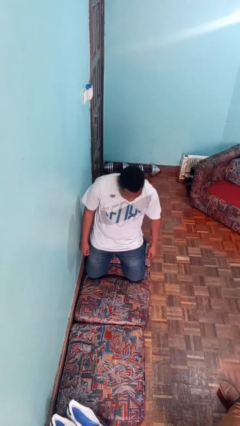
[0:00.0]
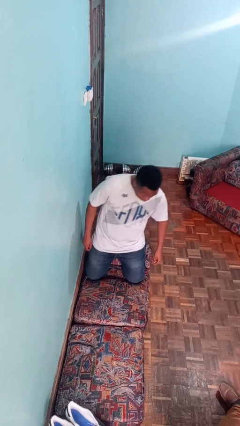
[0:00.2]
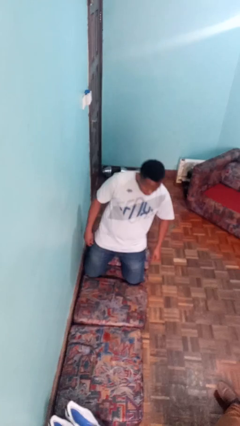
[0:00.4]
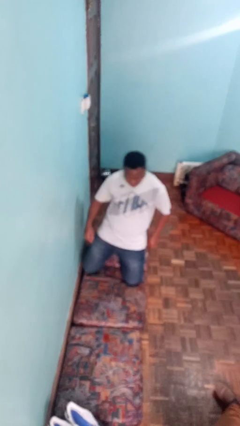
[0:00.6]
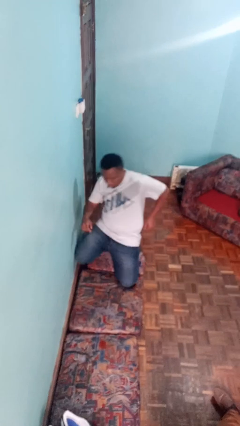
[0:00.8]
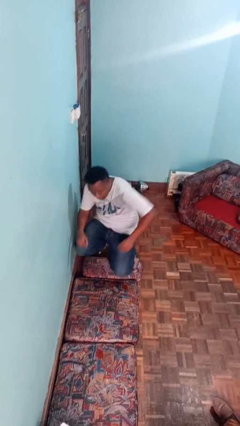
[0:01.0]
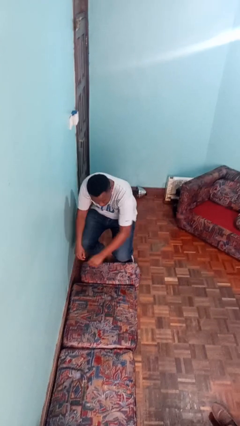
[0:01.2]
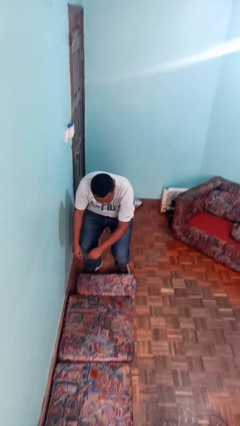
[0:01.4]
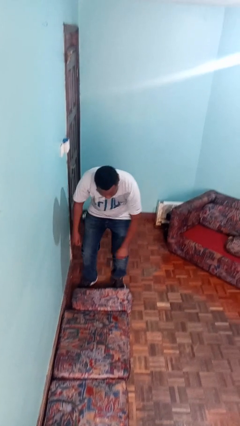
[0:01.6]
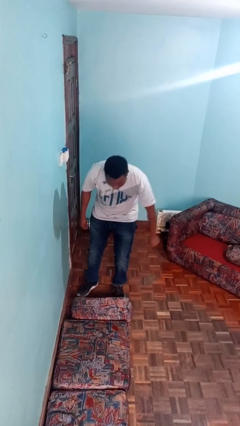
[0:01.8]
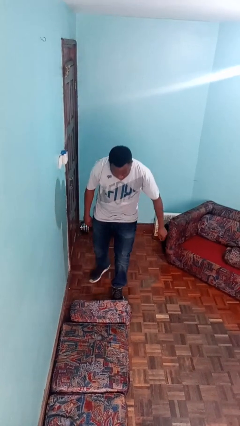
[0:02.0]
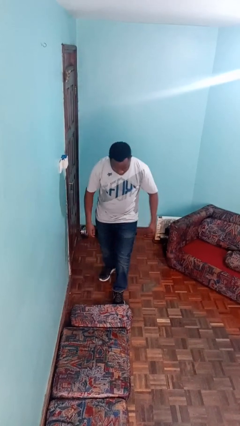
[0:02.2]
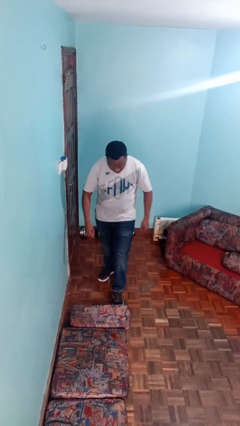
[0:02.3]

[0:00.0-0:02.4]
person stands up from floor

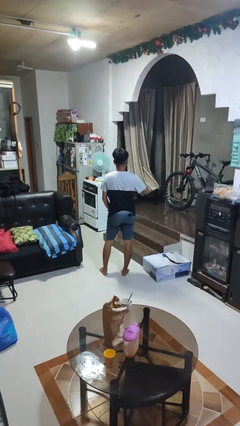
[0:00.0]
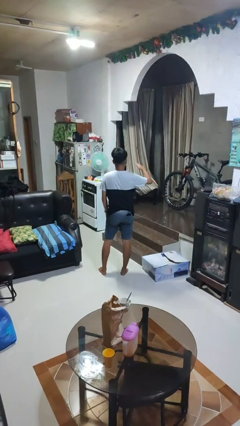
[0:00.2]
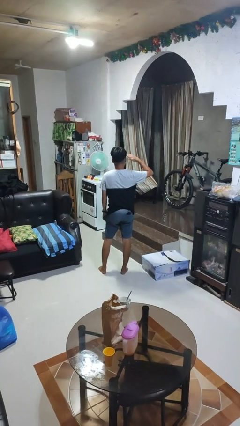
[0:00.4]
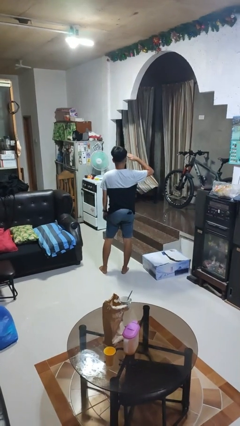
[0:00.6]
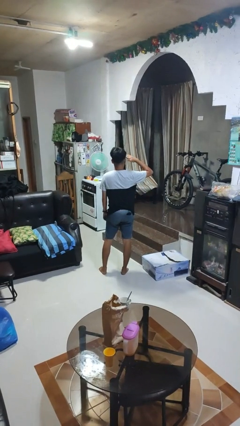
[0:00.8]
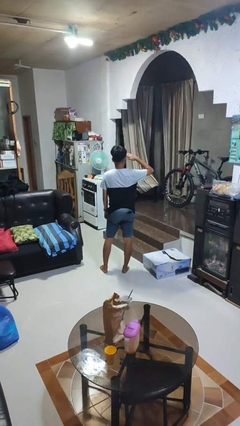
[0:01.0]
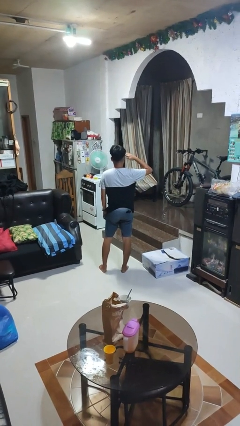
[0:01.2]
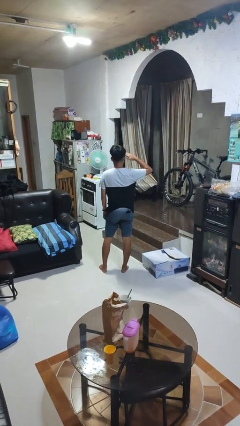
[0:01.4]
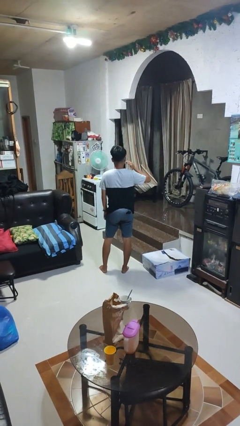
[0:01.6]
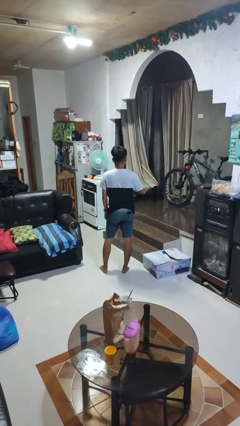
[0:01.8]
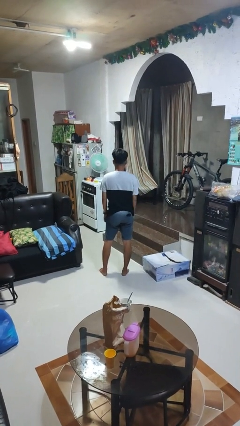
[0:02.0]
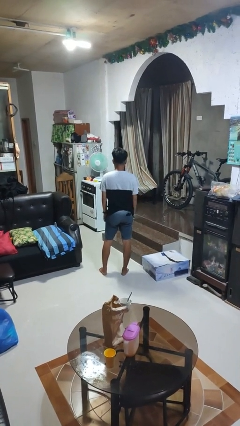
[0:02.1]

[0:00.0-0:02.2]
person salutes

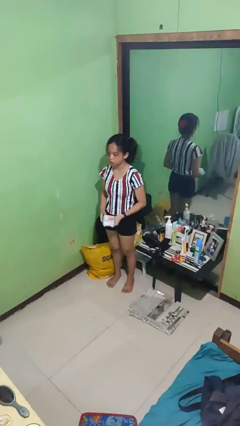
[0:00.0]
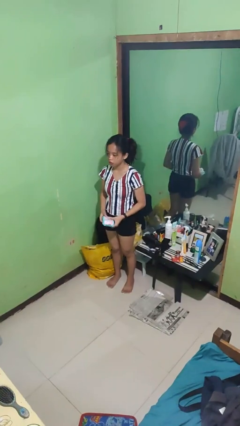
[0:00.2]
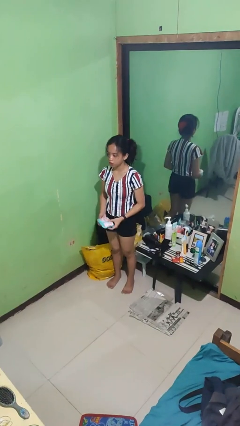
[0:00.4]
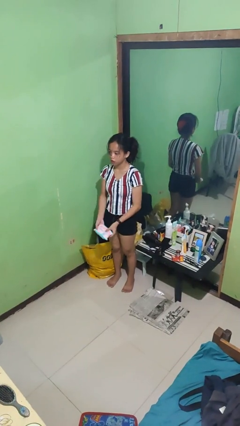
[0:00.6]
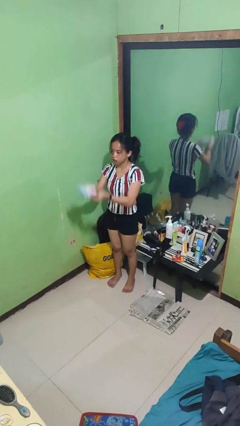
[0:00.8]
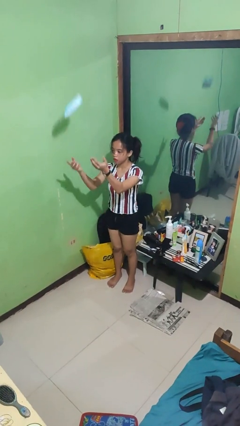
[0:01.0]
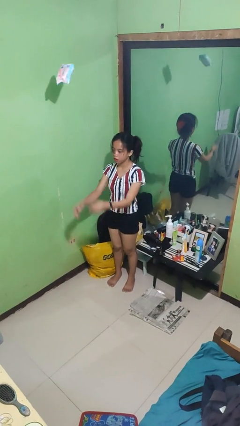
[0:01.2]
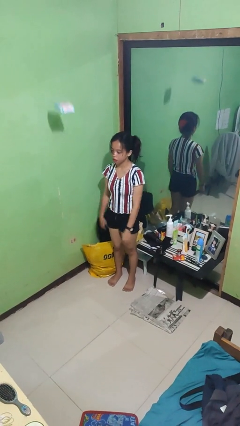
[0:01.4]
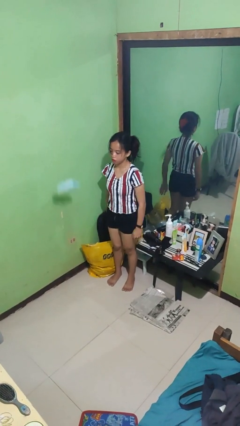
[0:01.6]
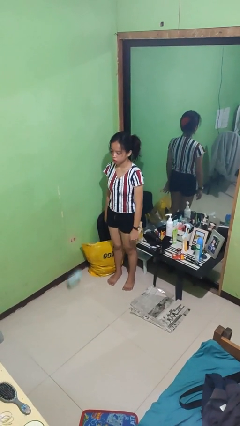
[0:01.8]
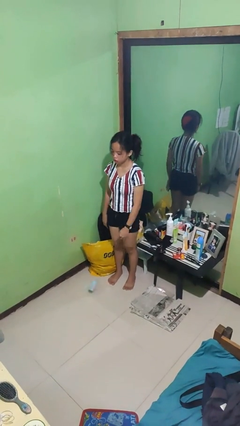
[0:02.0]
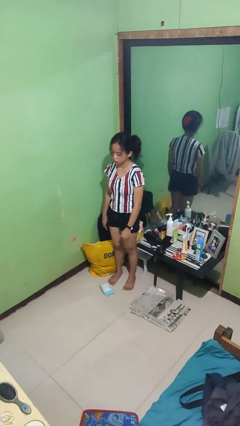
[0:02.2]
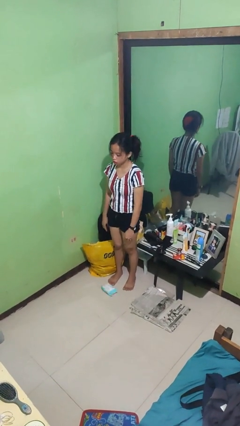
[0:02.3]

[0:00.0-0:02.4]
person throws object into air

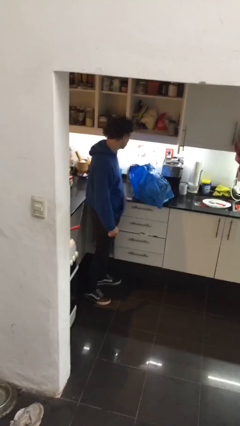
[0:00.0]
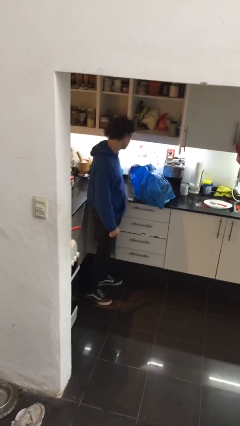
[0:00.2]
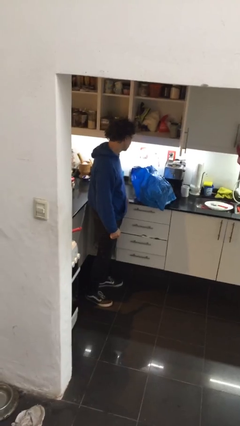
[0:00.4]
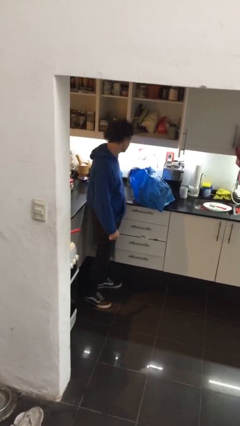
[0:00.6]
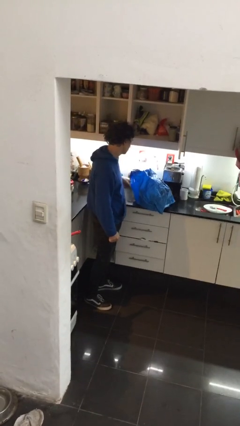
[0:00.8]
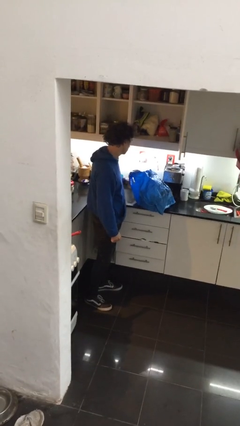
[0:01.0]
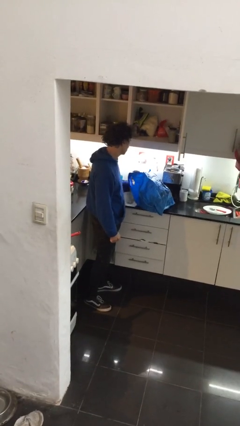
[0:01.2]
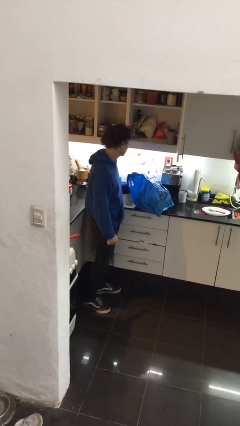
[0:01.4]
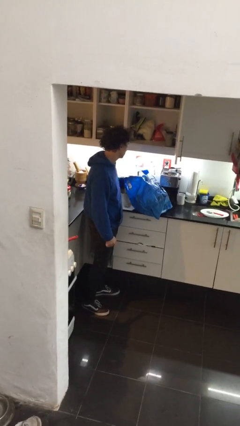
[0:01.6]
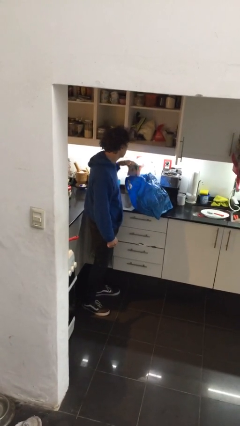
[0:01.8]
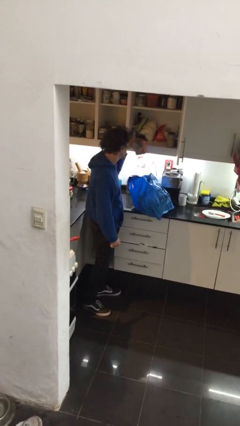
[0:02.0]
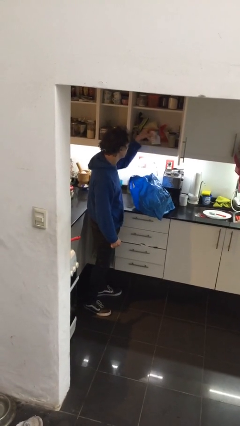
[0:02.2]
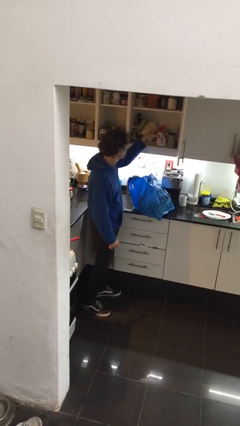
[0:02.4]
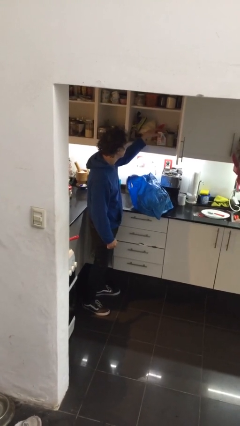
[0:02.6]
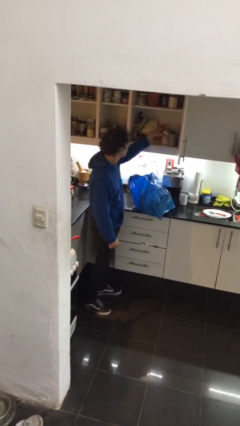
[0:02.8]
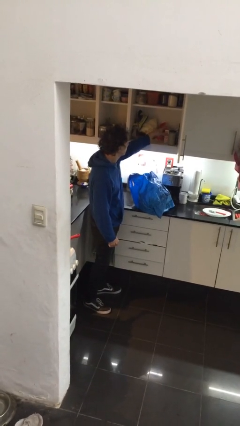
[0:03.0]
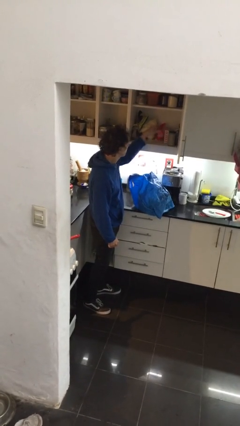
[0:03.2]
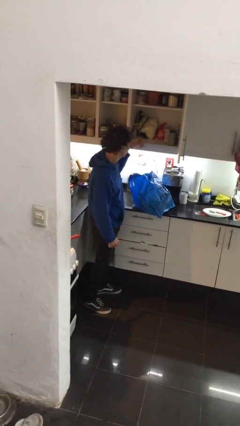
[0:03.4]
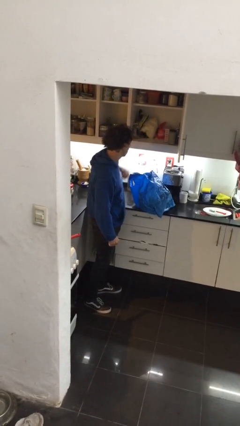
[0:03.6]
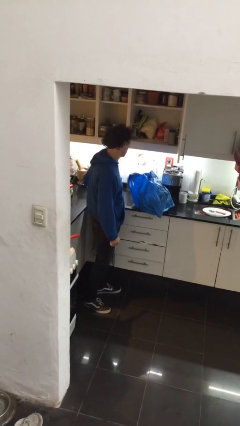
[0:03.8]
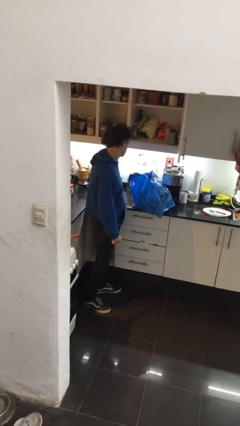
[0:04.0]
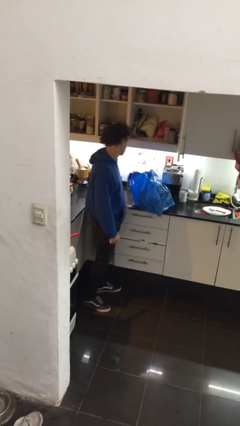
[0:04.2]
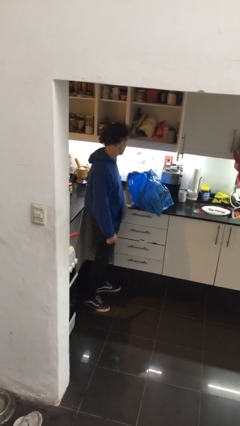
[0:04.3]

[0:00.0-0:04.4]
person loads groceries into cabinet

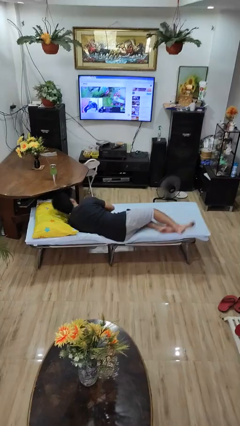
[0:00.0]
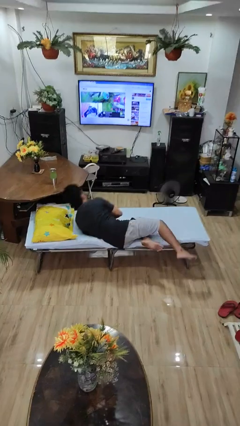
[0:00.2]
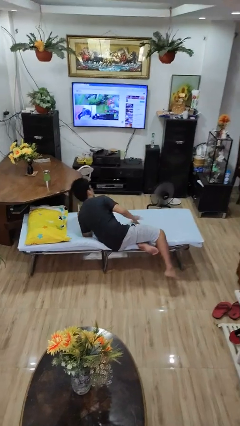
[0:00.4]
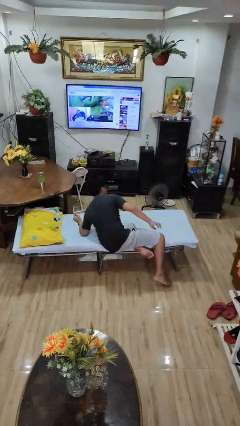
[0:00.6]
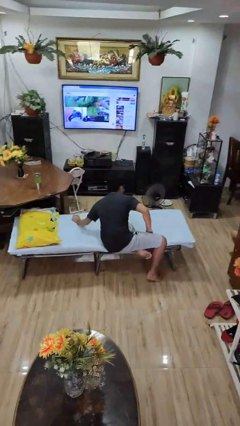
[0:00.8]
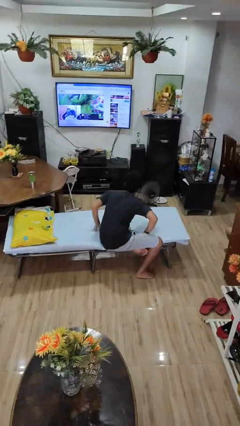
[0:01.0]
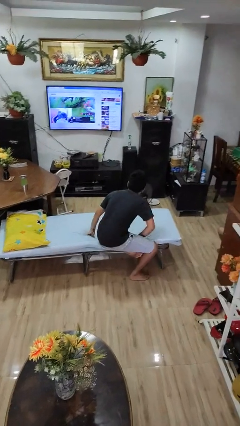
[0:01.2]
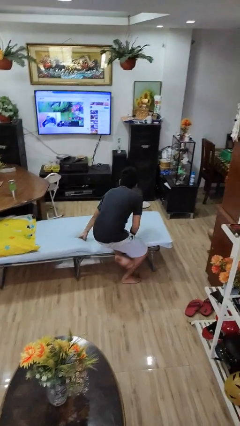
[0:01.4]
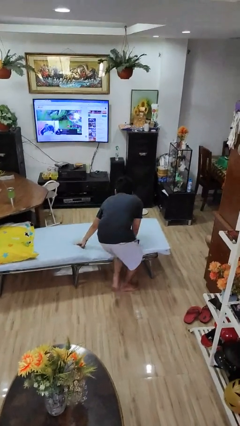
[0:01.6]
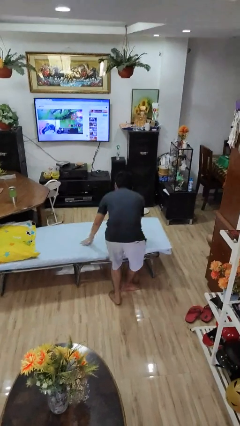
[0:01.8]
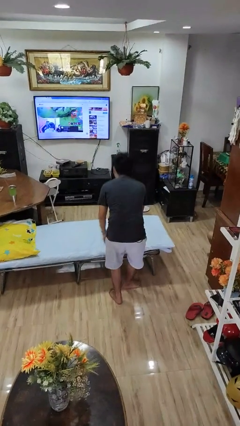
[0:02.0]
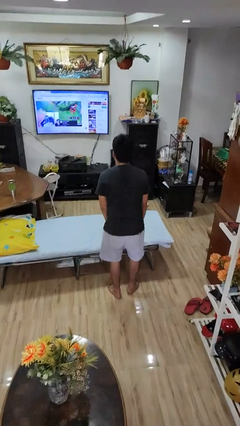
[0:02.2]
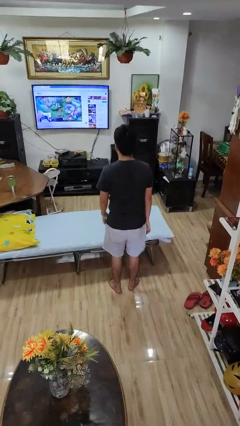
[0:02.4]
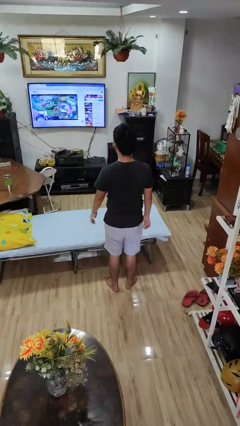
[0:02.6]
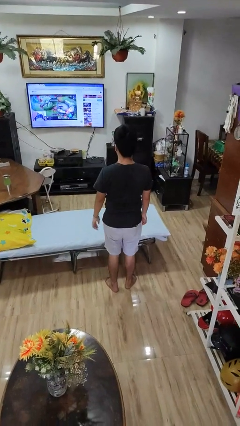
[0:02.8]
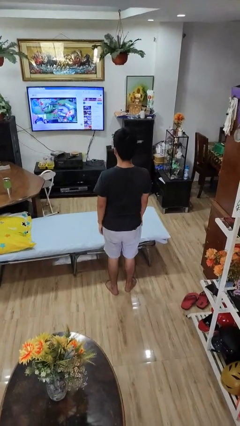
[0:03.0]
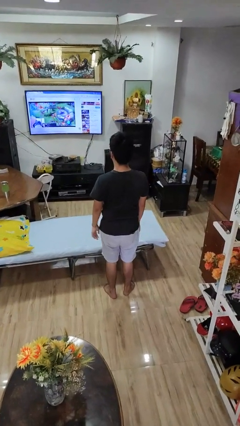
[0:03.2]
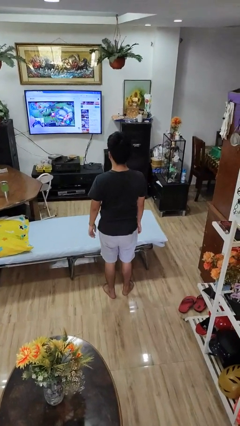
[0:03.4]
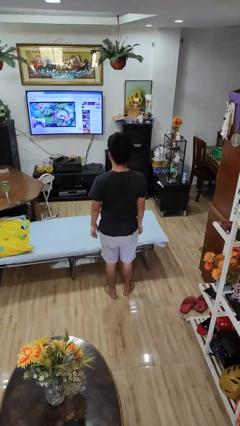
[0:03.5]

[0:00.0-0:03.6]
person stands up

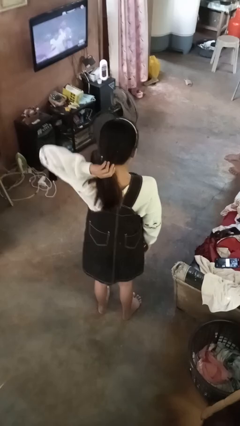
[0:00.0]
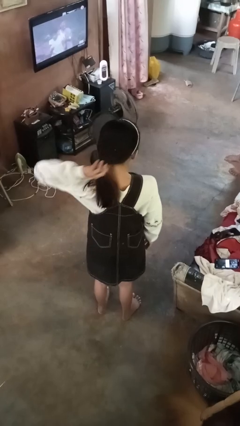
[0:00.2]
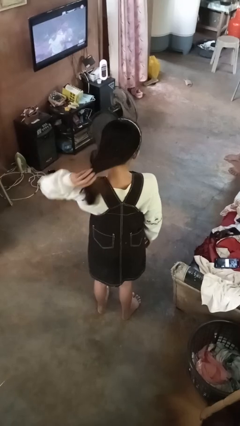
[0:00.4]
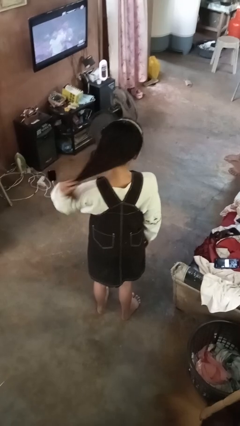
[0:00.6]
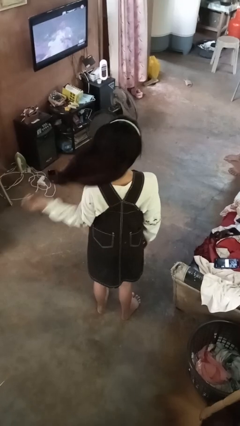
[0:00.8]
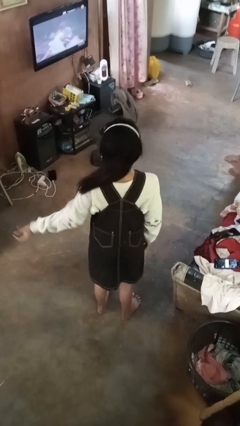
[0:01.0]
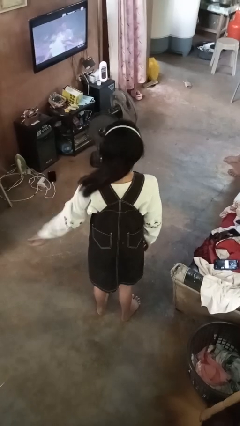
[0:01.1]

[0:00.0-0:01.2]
person takes off hairtie

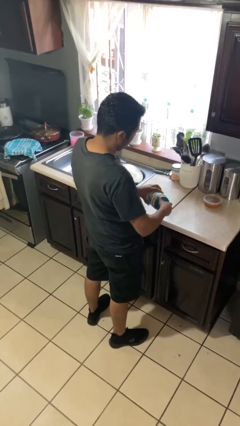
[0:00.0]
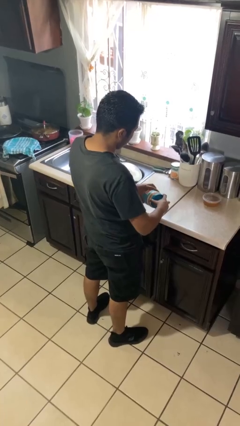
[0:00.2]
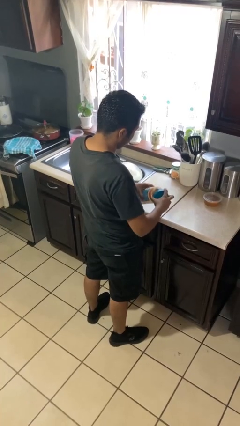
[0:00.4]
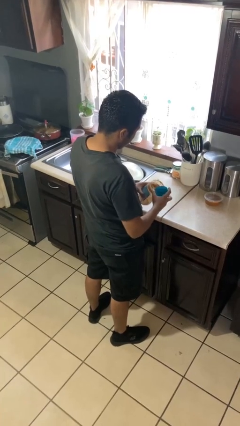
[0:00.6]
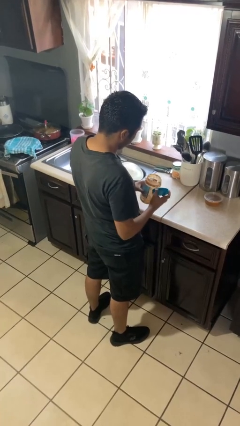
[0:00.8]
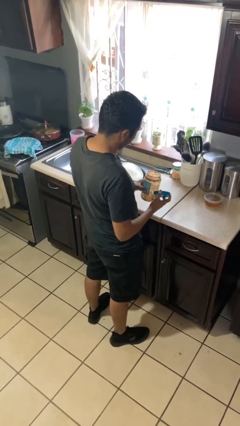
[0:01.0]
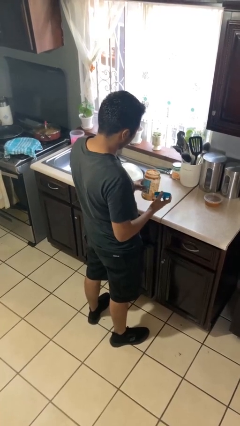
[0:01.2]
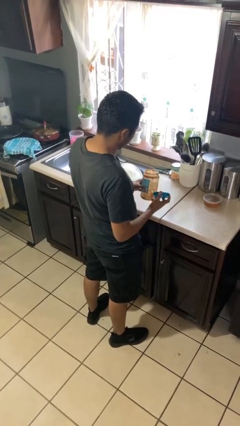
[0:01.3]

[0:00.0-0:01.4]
person opens jar
